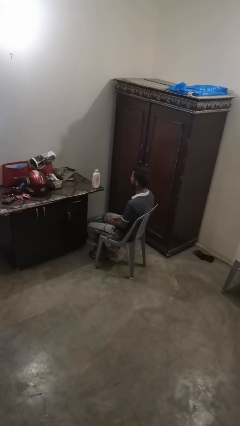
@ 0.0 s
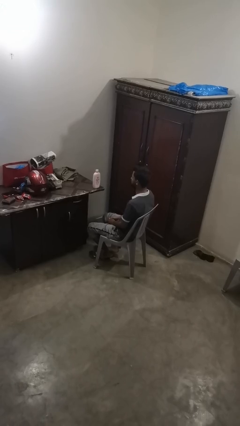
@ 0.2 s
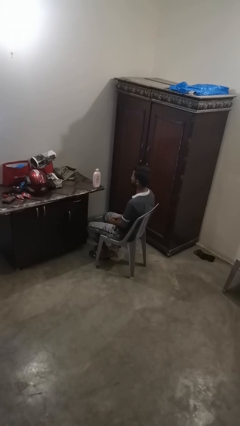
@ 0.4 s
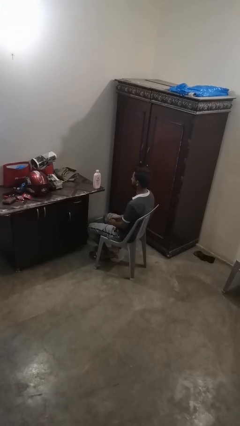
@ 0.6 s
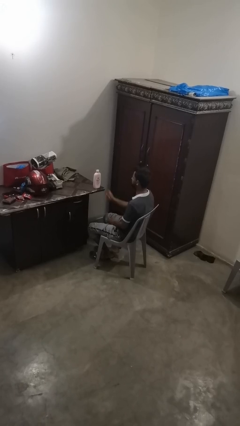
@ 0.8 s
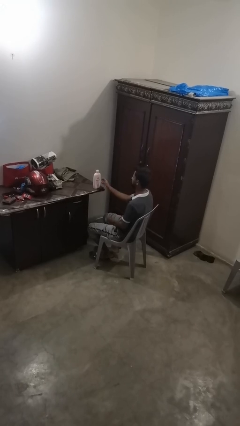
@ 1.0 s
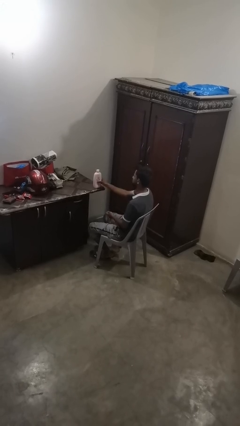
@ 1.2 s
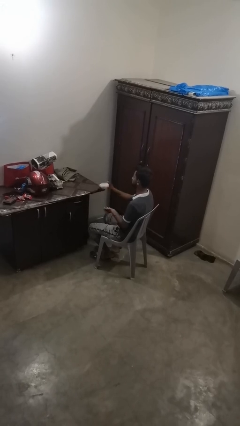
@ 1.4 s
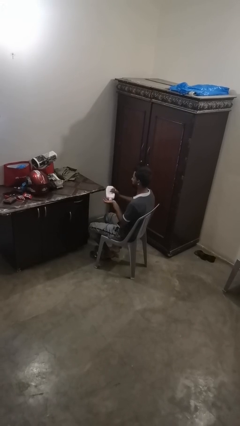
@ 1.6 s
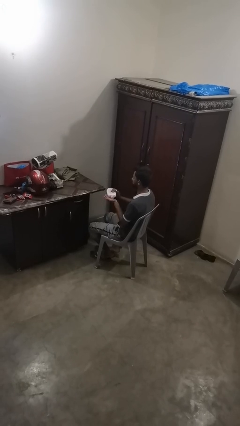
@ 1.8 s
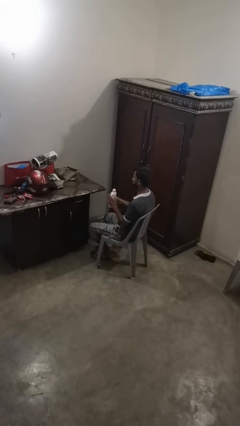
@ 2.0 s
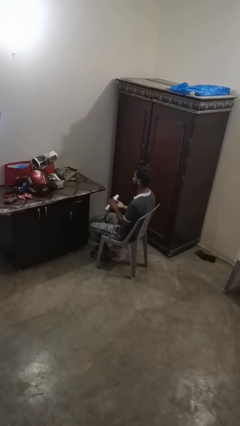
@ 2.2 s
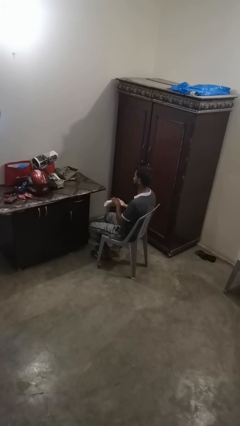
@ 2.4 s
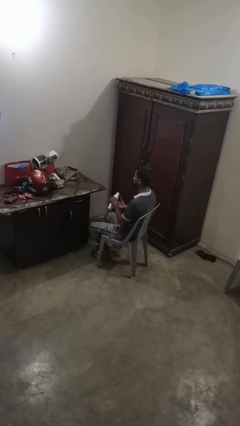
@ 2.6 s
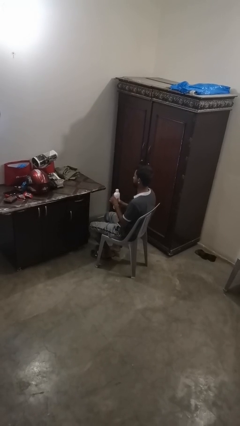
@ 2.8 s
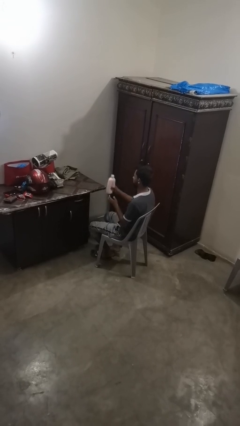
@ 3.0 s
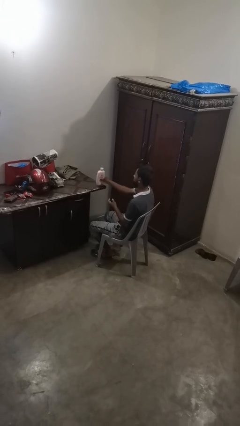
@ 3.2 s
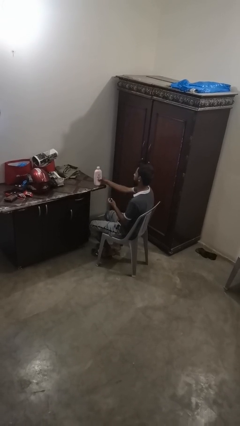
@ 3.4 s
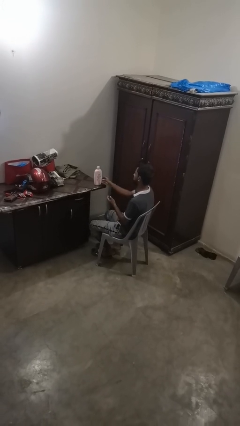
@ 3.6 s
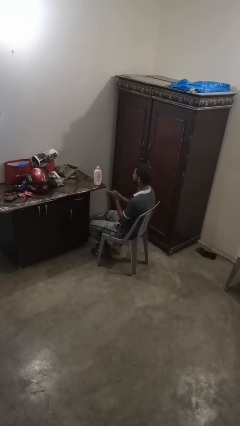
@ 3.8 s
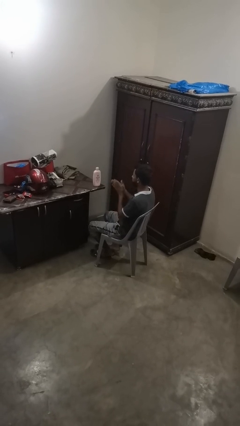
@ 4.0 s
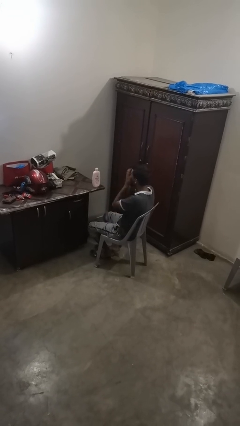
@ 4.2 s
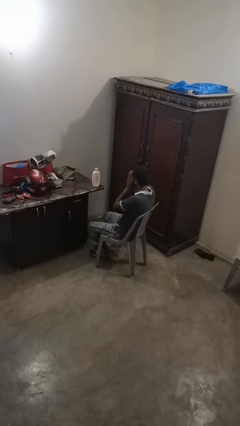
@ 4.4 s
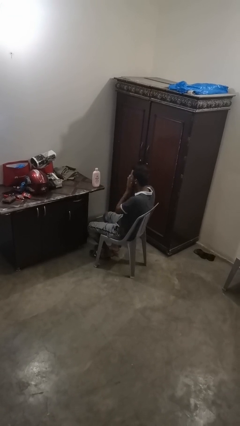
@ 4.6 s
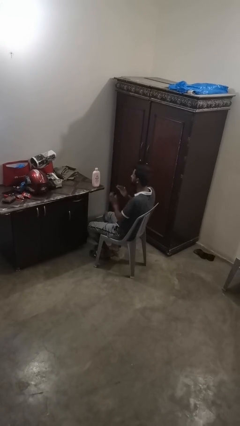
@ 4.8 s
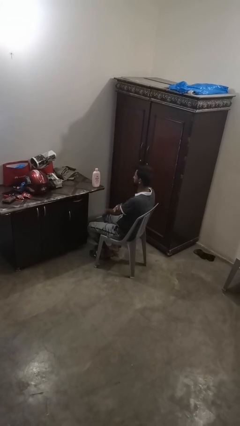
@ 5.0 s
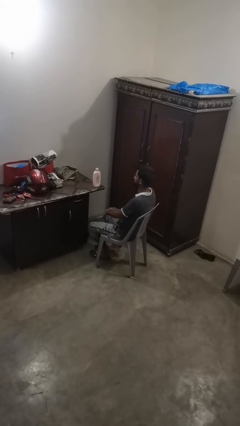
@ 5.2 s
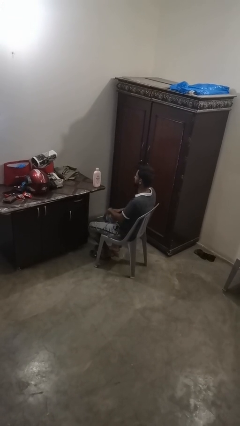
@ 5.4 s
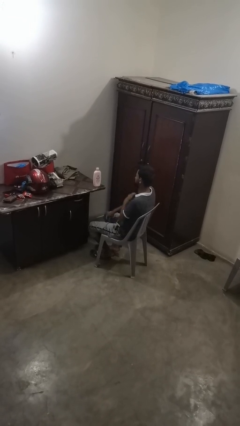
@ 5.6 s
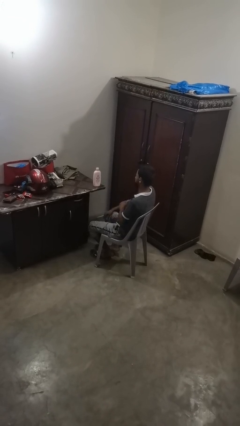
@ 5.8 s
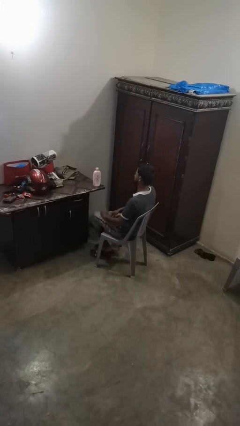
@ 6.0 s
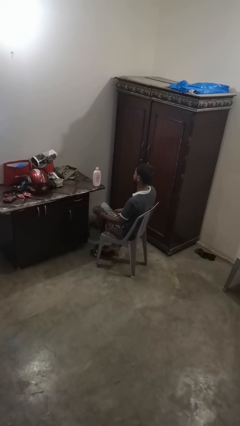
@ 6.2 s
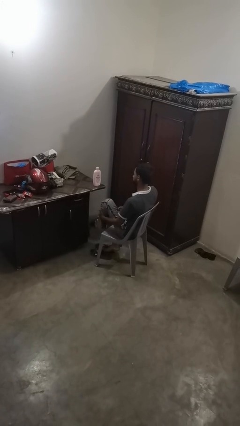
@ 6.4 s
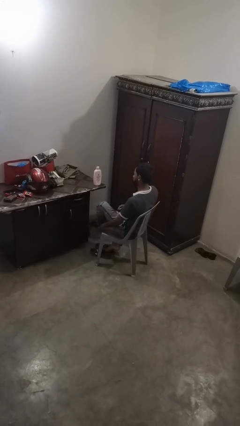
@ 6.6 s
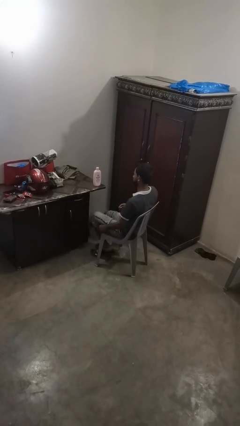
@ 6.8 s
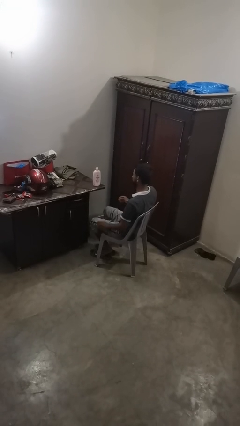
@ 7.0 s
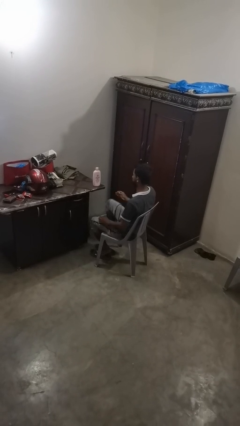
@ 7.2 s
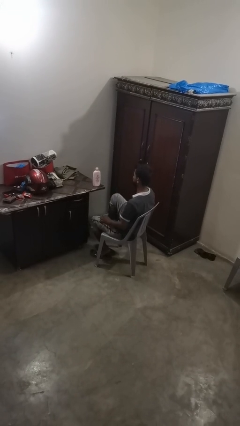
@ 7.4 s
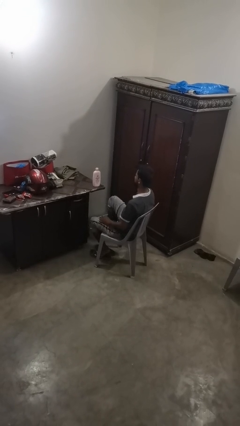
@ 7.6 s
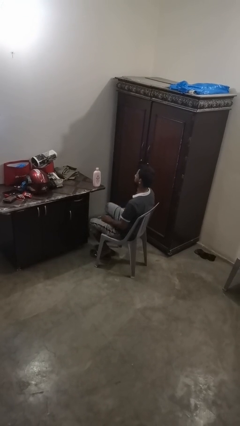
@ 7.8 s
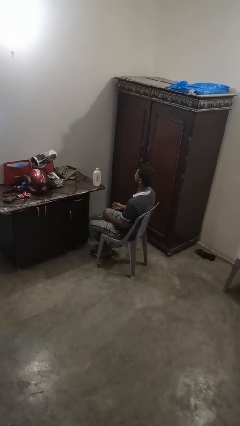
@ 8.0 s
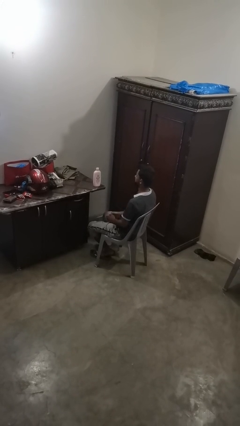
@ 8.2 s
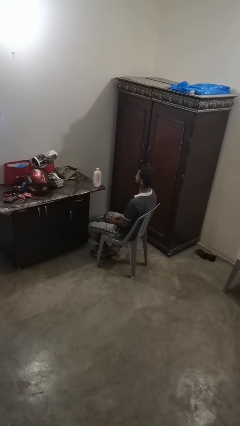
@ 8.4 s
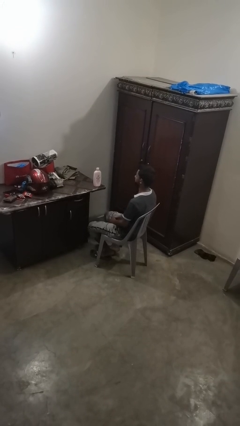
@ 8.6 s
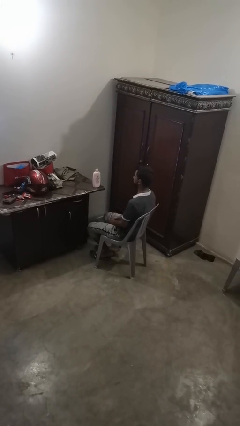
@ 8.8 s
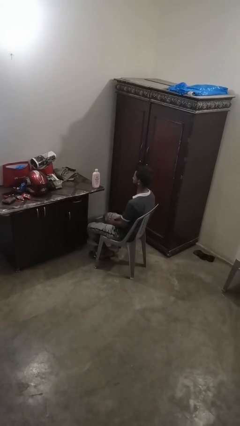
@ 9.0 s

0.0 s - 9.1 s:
person applies sunscreen

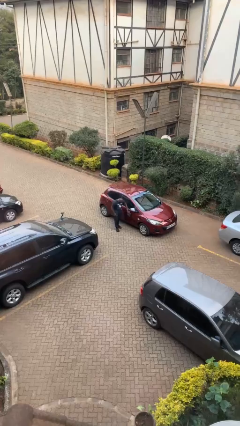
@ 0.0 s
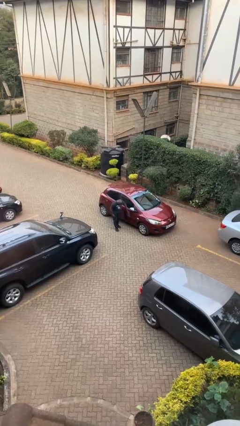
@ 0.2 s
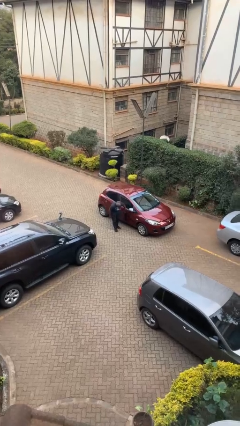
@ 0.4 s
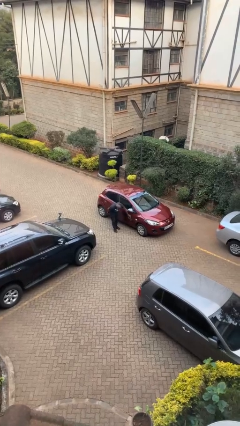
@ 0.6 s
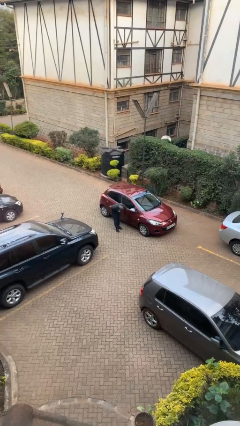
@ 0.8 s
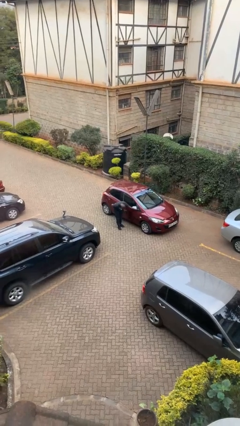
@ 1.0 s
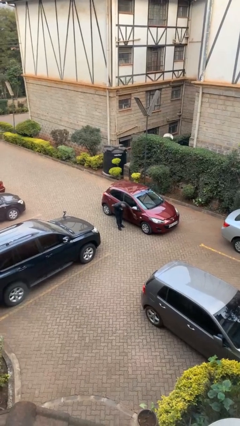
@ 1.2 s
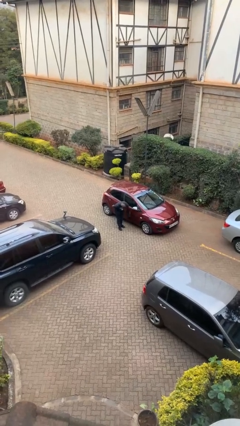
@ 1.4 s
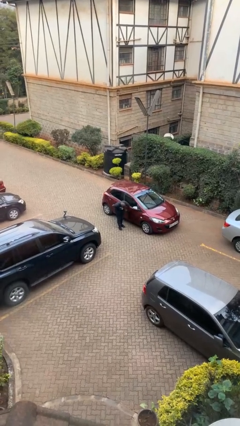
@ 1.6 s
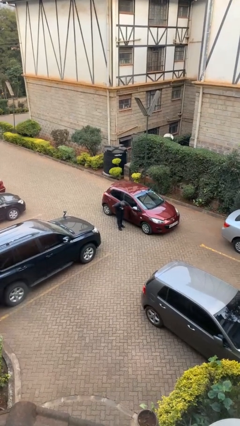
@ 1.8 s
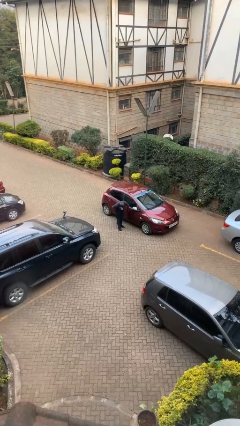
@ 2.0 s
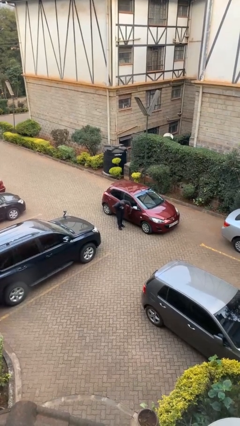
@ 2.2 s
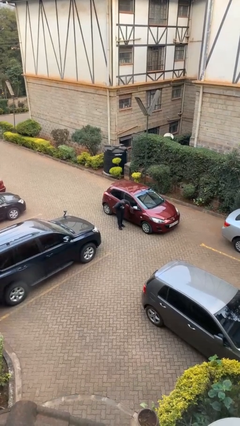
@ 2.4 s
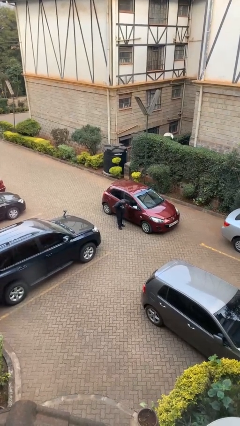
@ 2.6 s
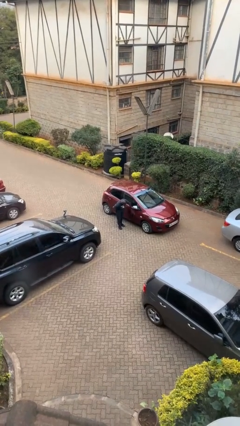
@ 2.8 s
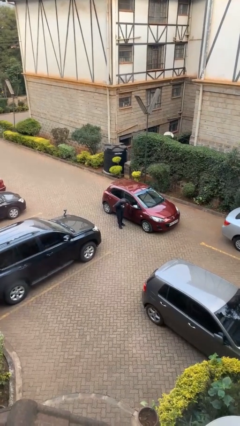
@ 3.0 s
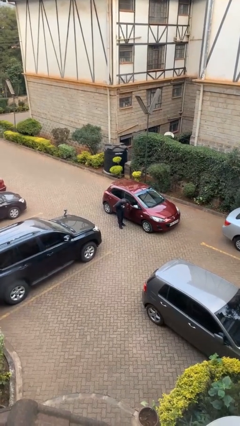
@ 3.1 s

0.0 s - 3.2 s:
person polishes car with rag

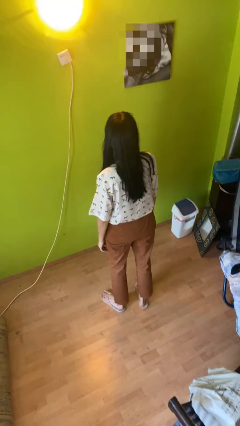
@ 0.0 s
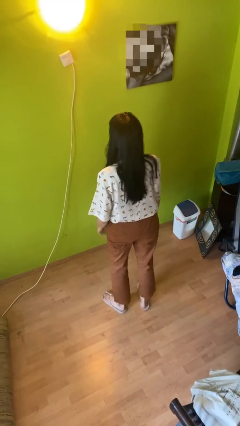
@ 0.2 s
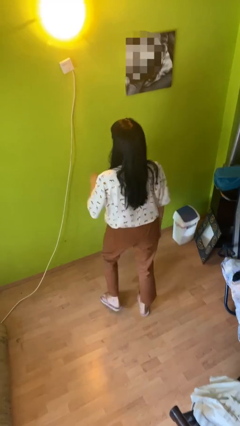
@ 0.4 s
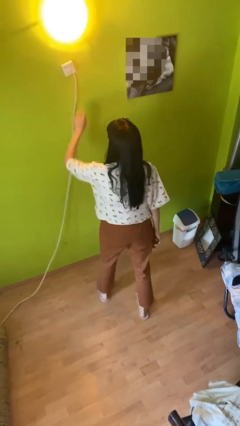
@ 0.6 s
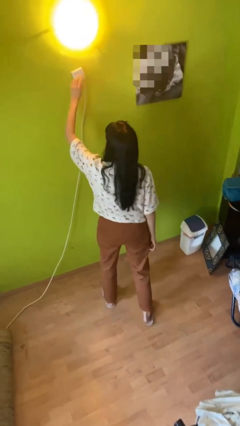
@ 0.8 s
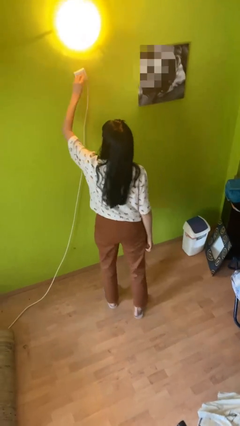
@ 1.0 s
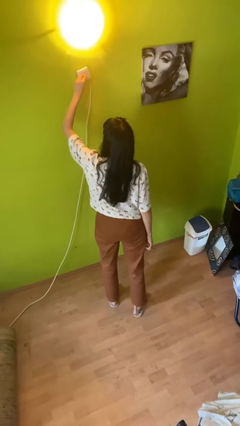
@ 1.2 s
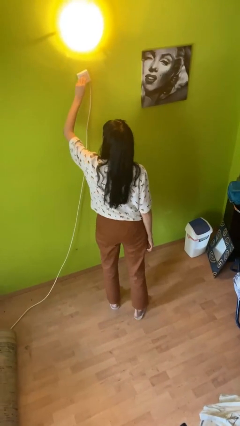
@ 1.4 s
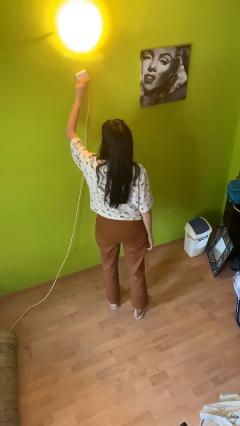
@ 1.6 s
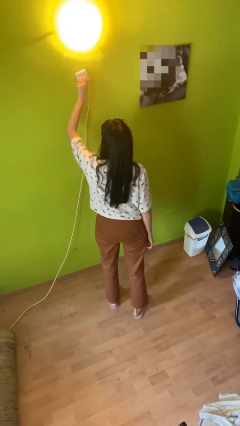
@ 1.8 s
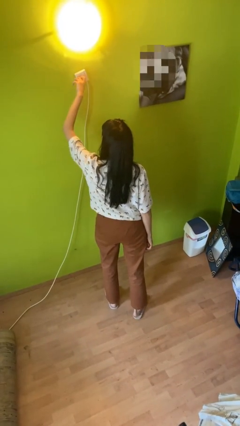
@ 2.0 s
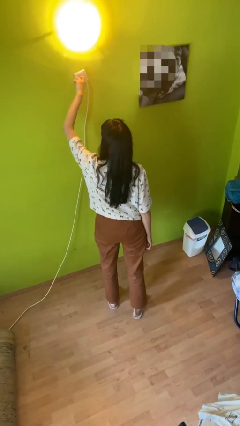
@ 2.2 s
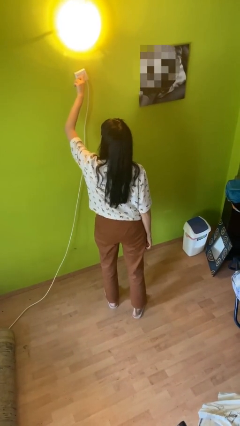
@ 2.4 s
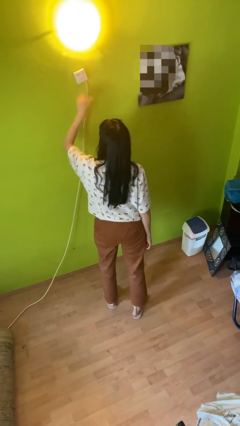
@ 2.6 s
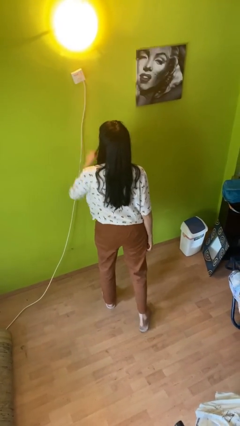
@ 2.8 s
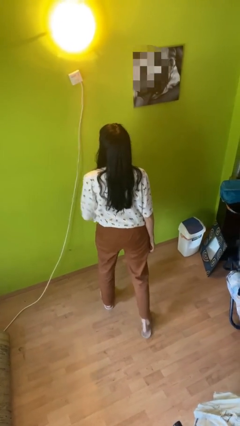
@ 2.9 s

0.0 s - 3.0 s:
person adjusts thermostat

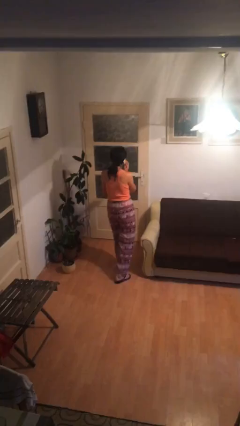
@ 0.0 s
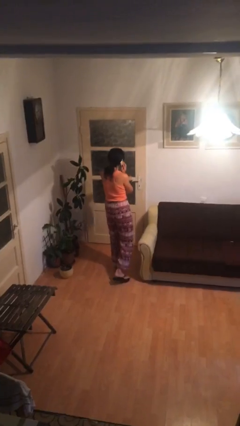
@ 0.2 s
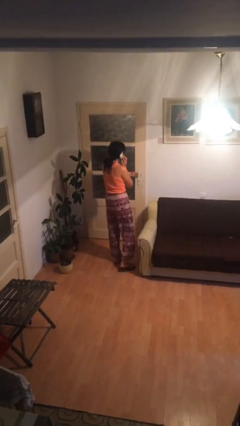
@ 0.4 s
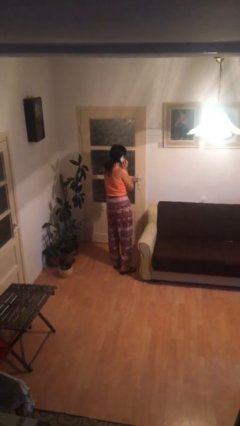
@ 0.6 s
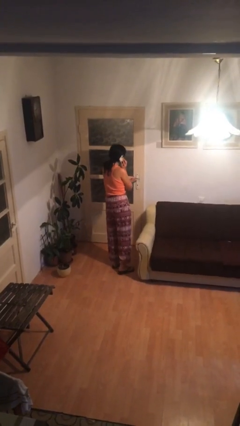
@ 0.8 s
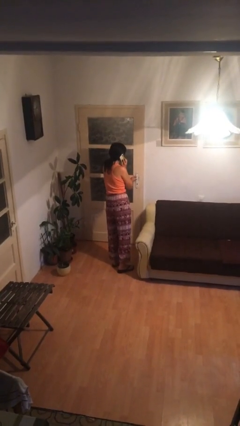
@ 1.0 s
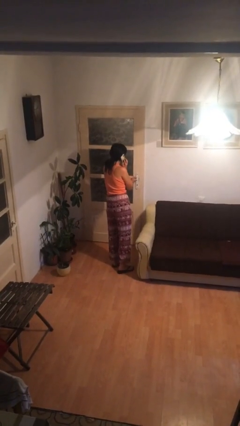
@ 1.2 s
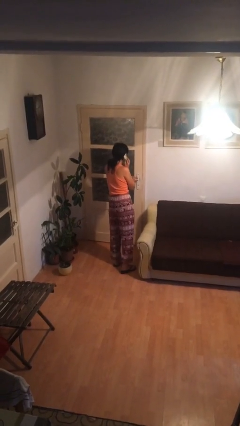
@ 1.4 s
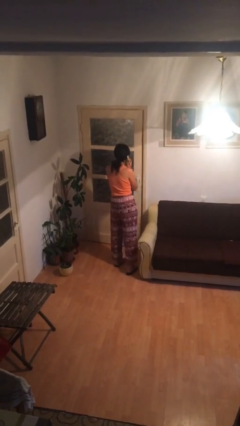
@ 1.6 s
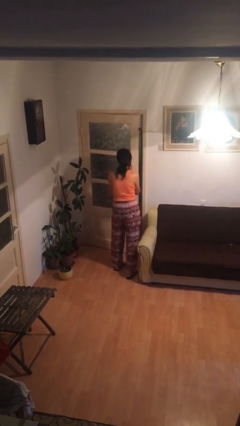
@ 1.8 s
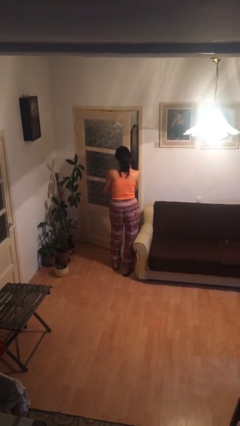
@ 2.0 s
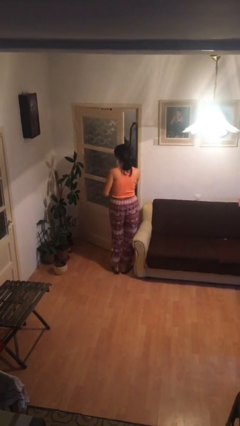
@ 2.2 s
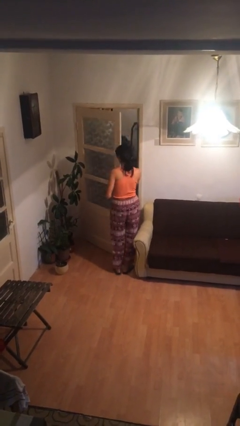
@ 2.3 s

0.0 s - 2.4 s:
person opens facility door
